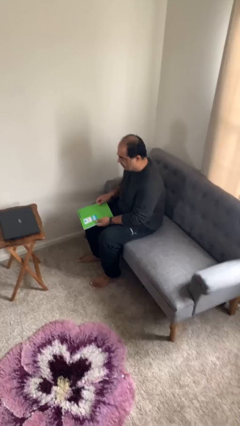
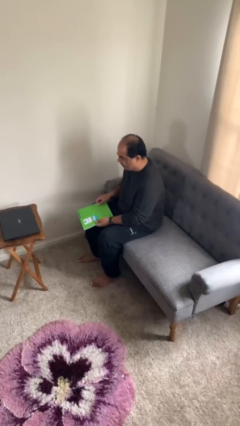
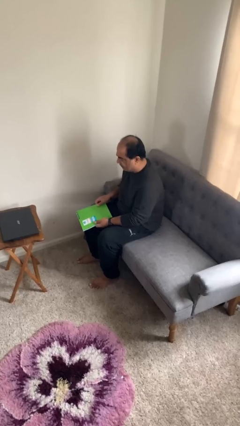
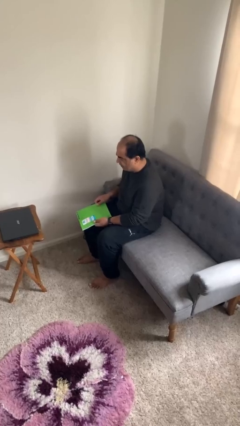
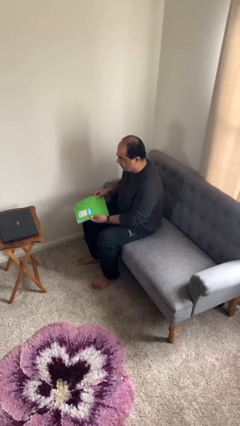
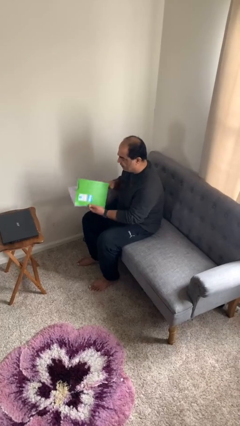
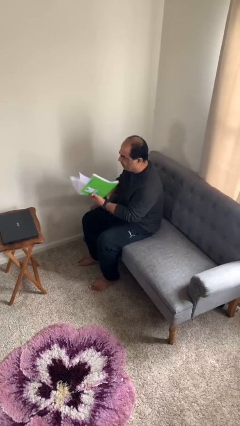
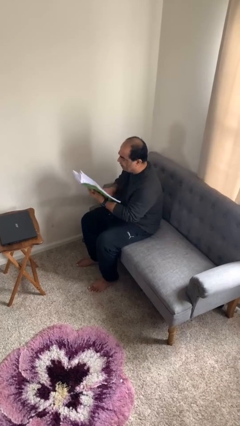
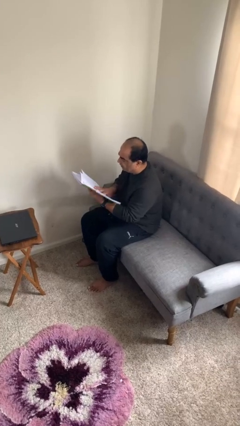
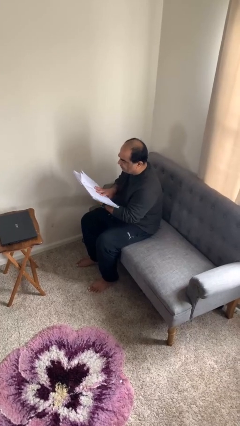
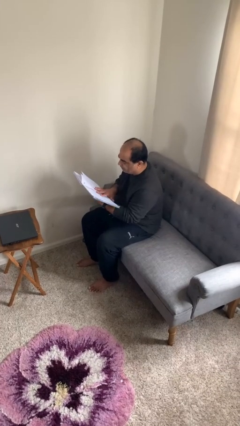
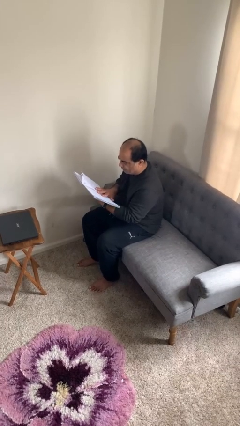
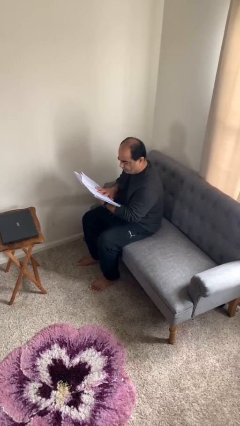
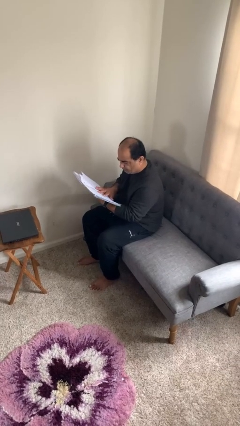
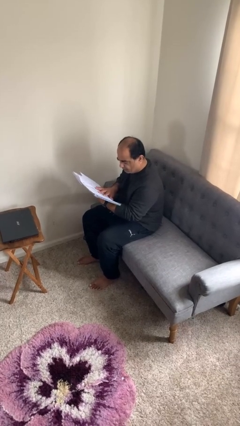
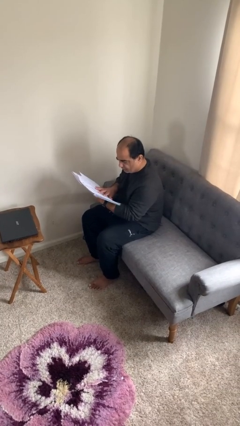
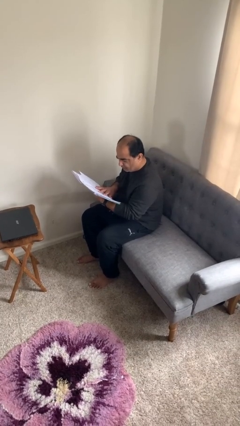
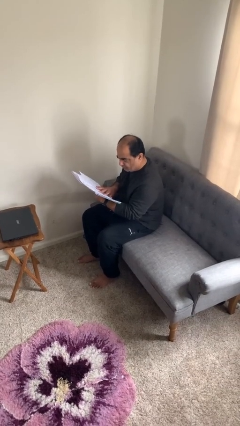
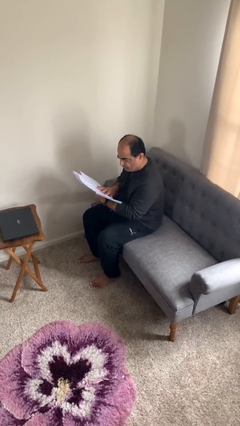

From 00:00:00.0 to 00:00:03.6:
person reads document

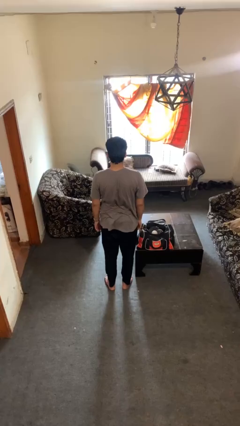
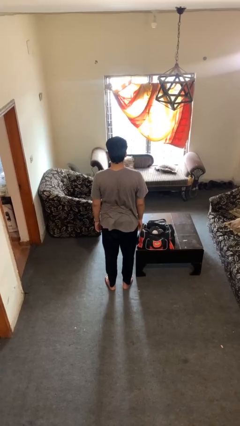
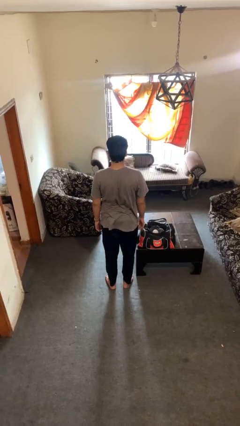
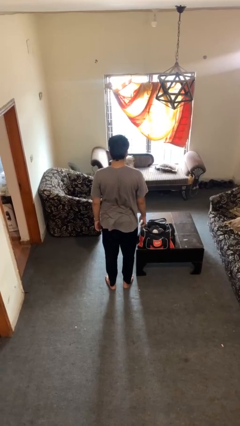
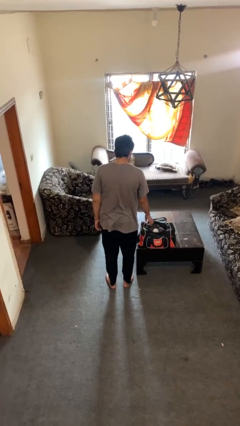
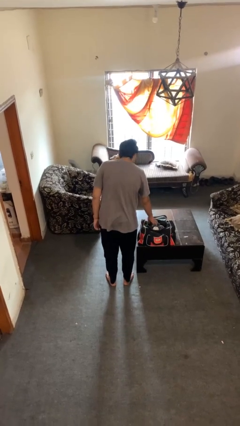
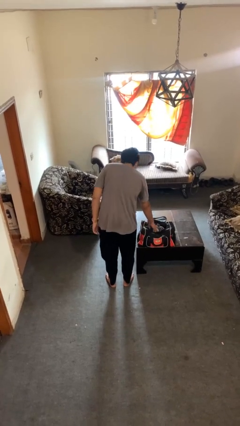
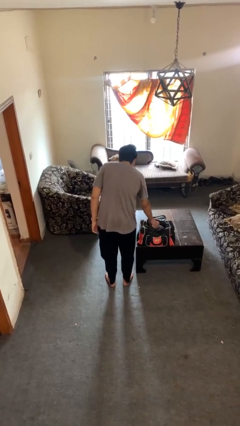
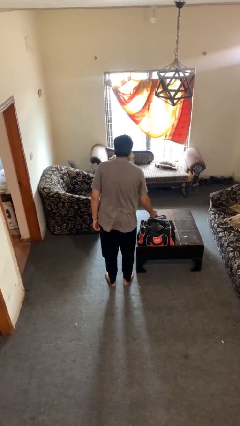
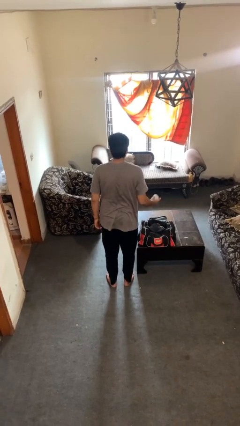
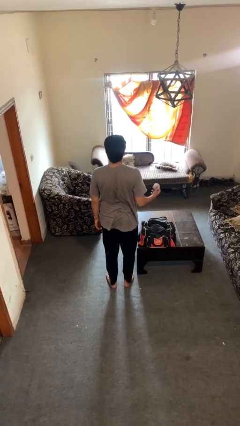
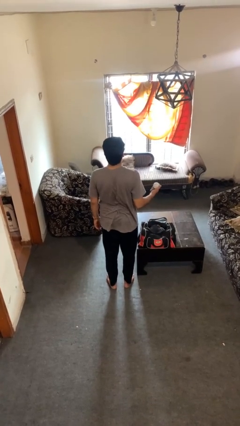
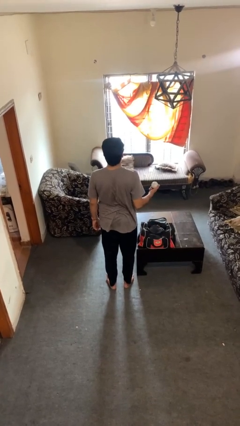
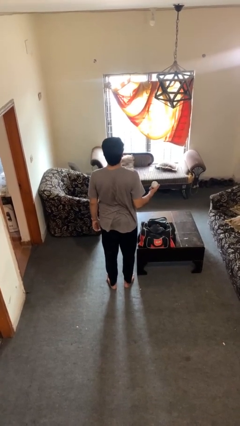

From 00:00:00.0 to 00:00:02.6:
person takes object from bag

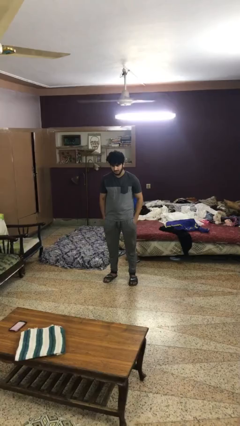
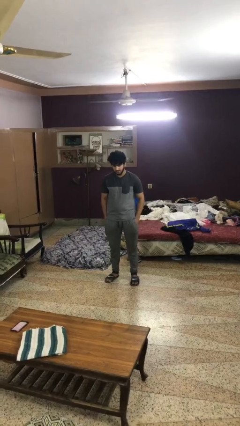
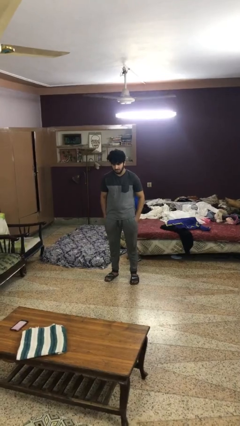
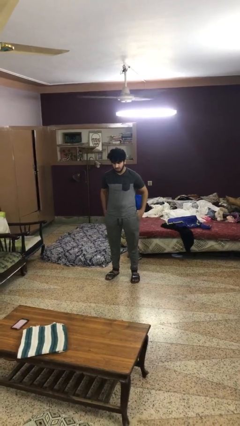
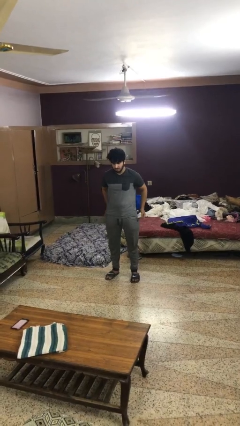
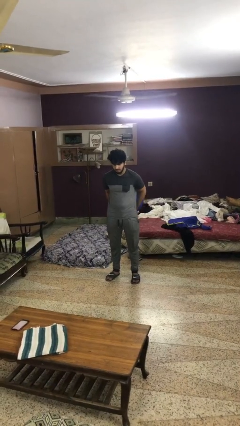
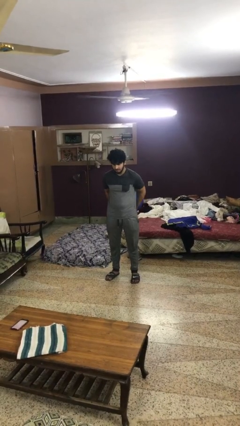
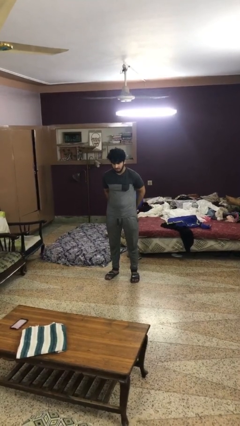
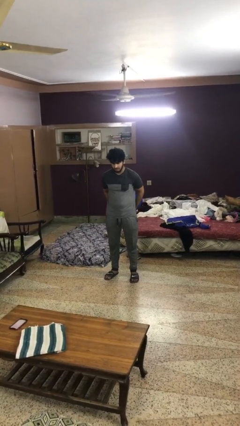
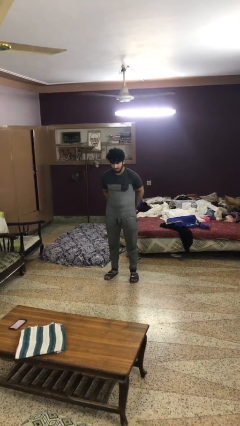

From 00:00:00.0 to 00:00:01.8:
person puts hands in back pockets

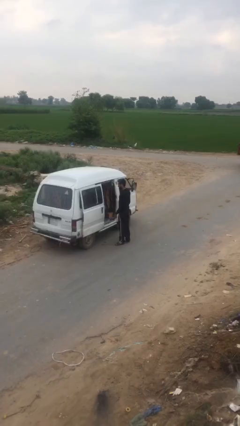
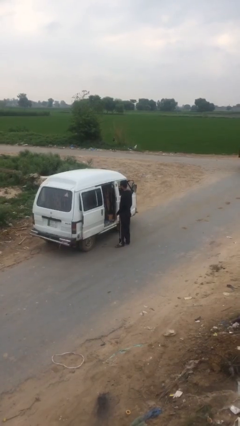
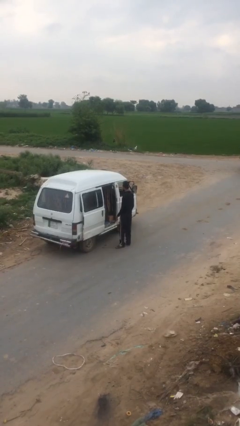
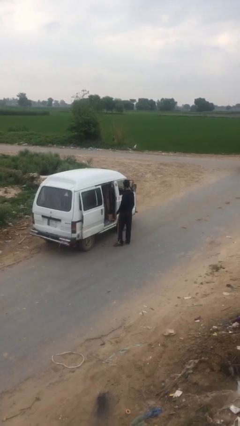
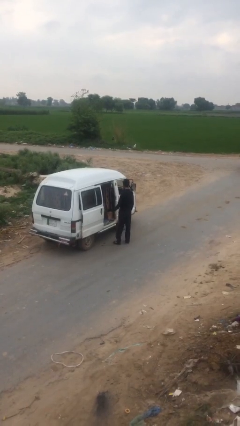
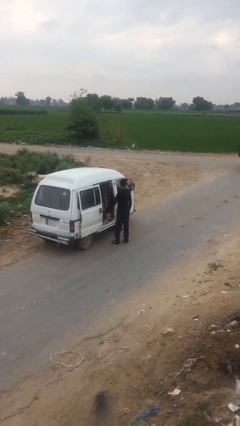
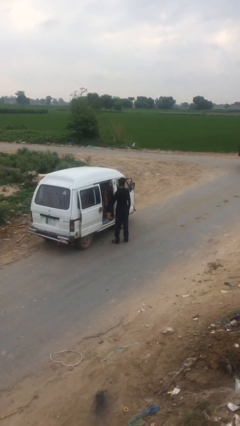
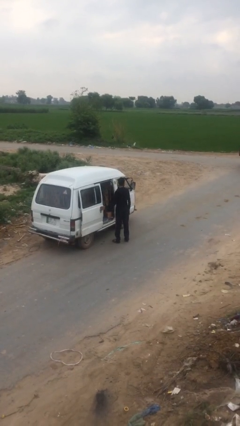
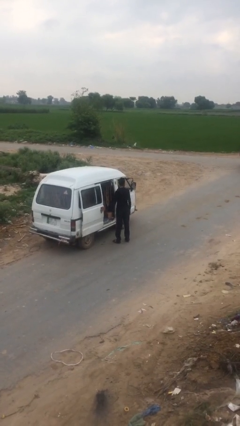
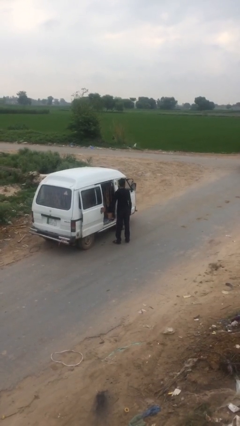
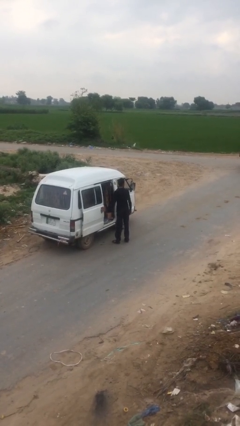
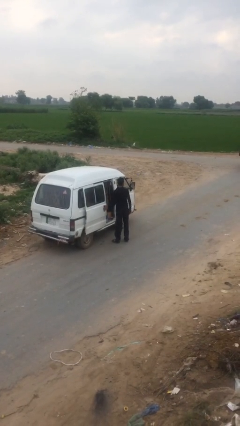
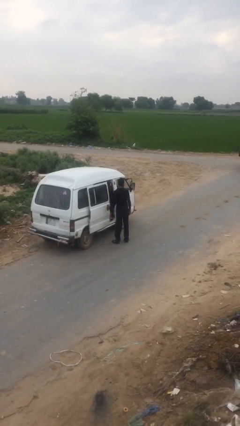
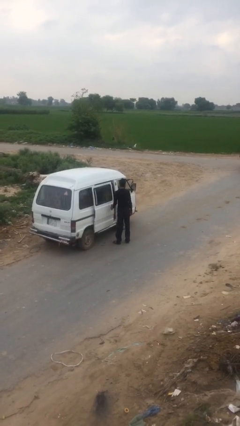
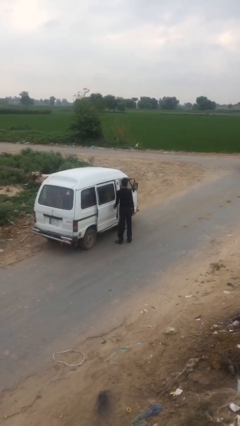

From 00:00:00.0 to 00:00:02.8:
person closes car door

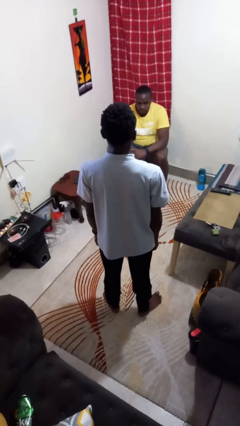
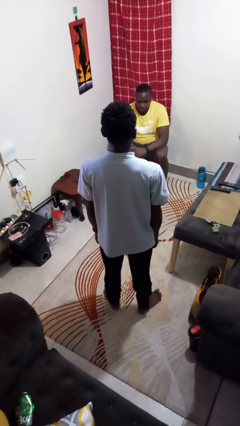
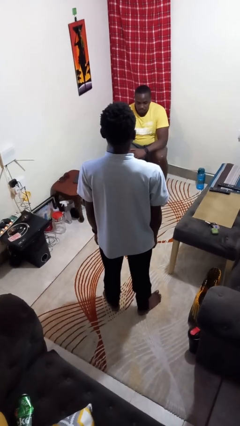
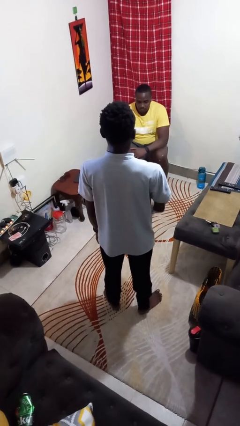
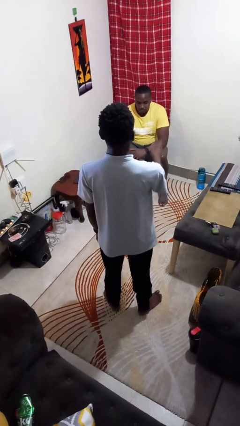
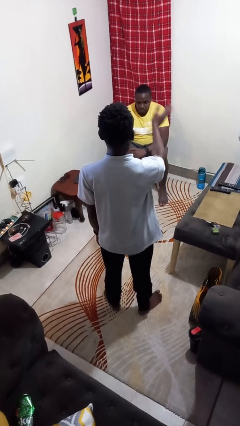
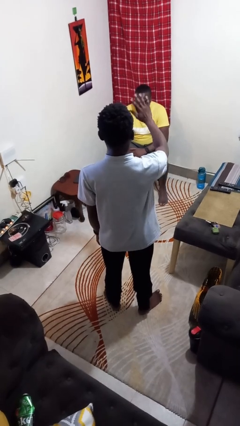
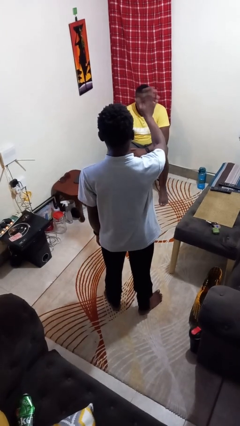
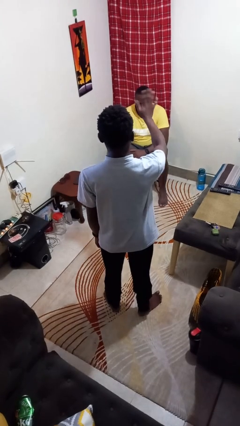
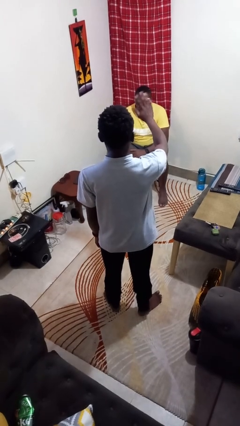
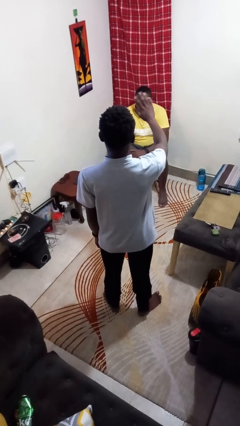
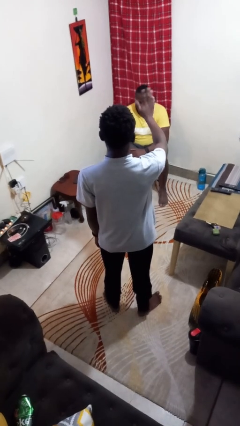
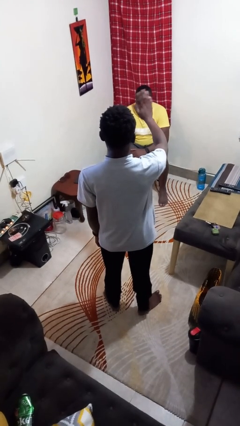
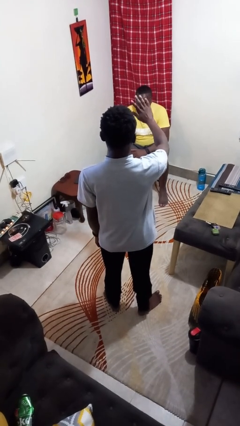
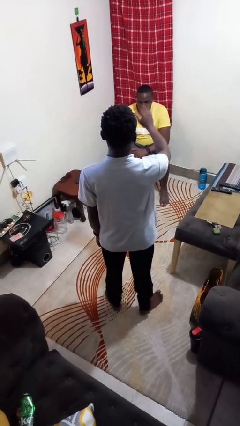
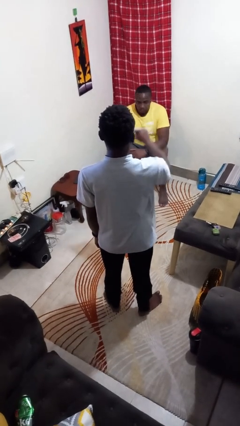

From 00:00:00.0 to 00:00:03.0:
person waves at person

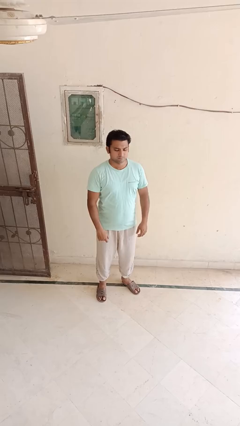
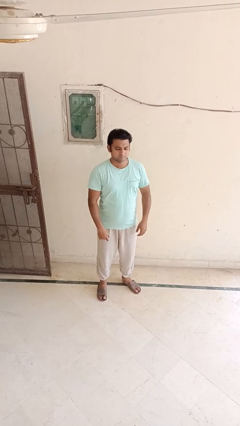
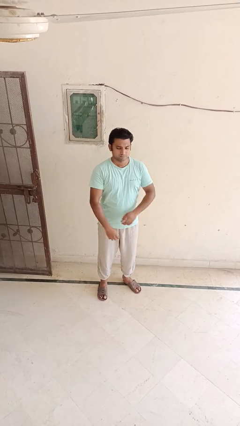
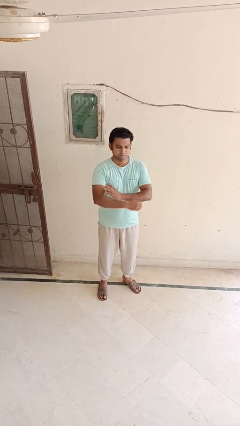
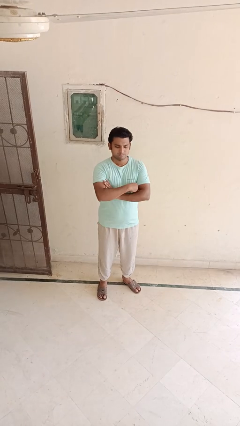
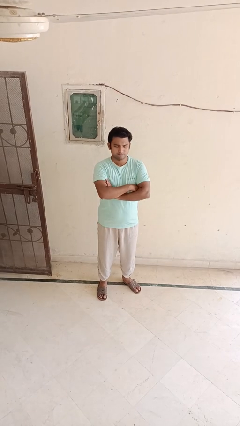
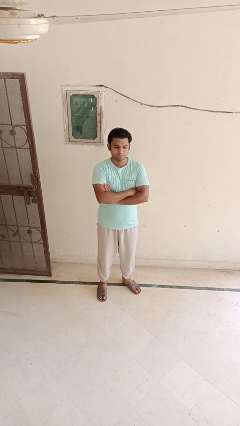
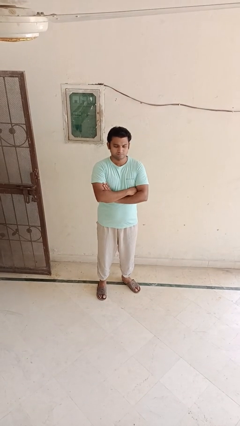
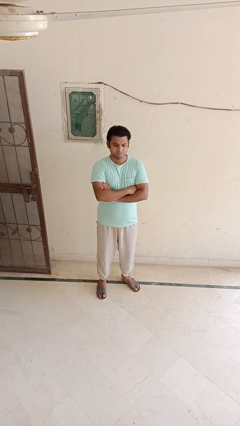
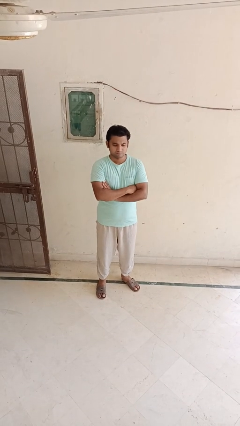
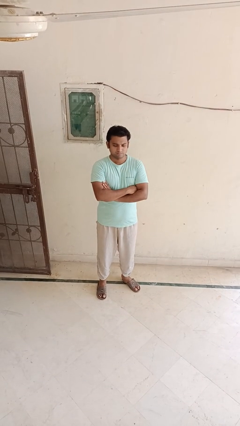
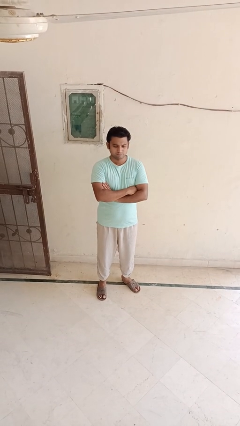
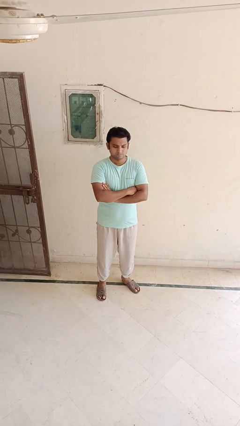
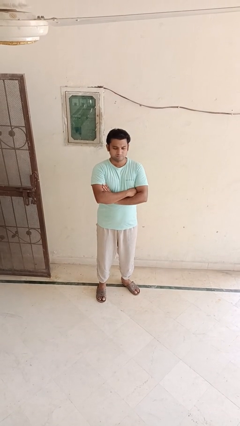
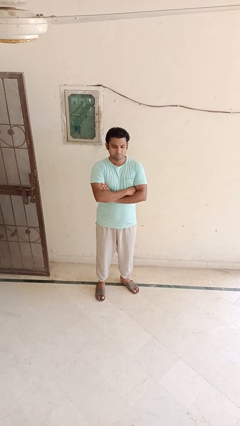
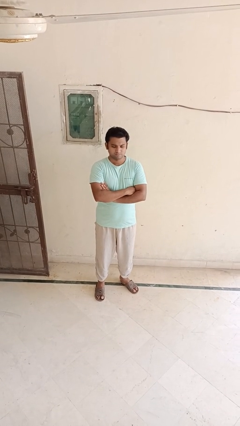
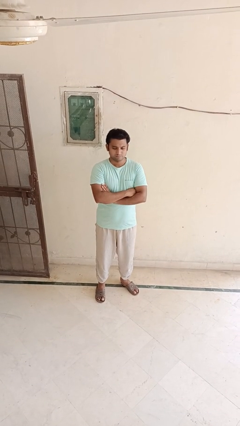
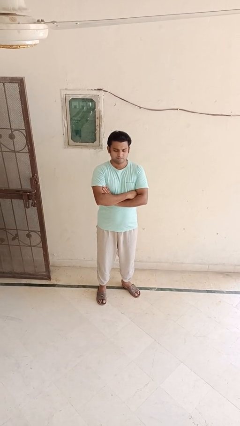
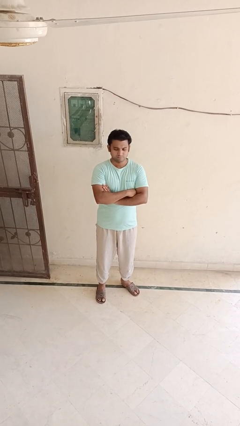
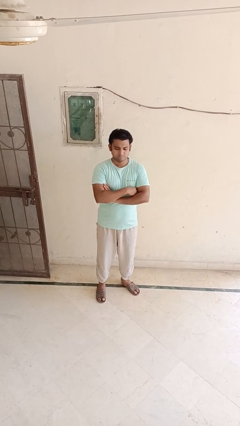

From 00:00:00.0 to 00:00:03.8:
person crosses arms
